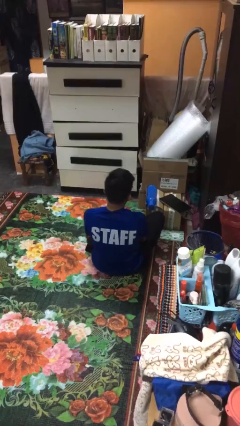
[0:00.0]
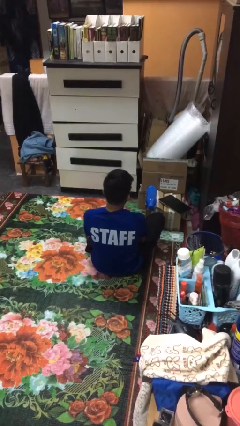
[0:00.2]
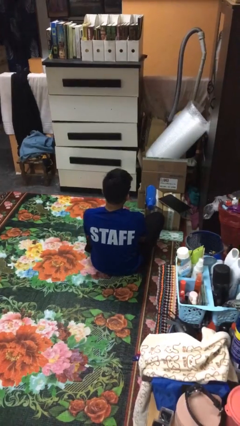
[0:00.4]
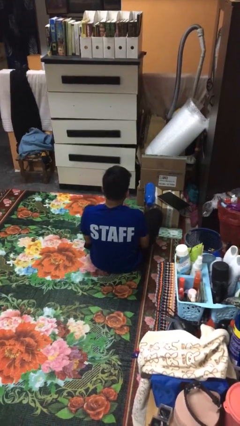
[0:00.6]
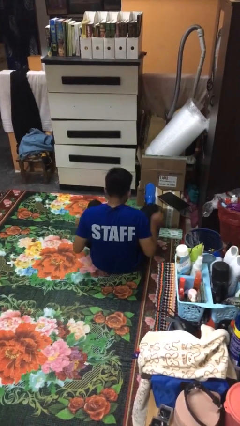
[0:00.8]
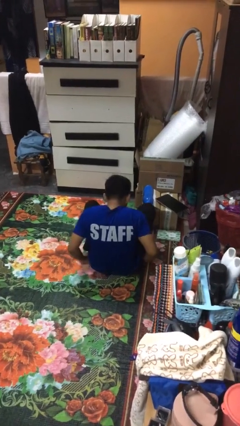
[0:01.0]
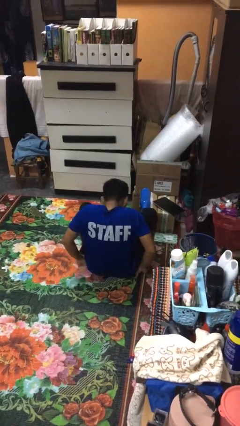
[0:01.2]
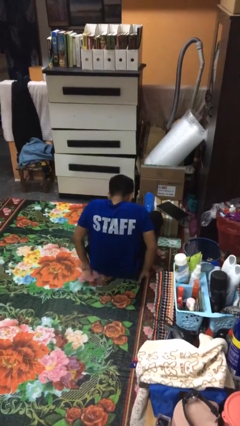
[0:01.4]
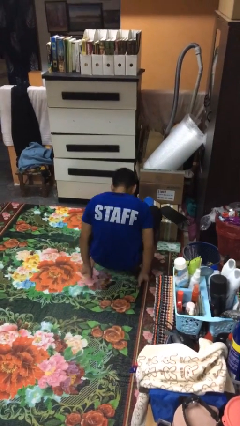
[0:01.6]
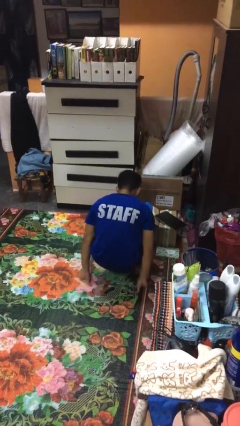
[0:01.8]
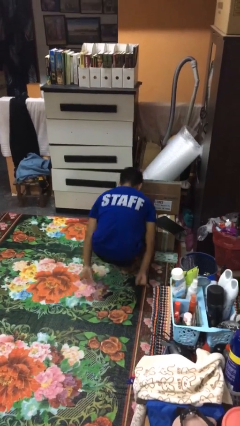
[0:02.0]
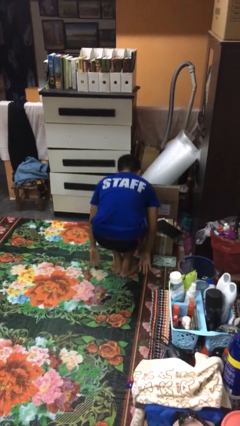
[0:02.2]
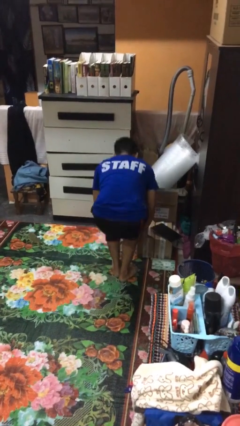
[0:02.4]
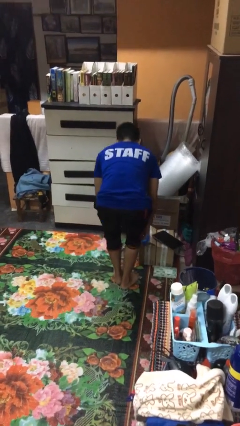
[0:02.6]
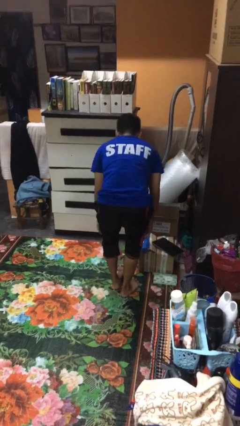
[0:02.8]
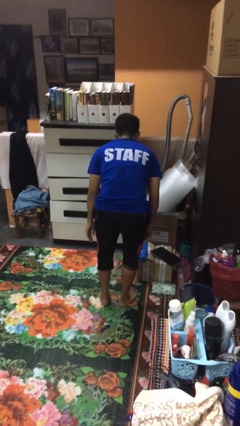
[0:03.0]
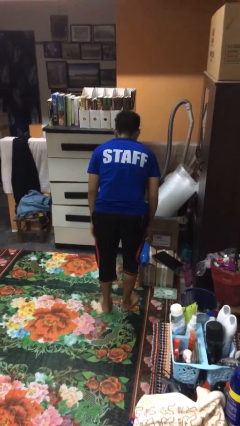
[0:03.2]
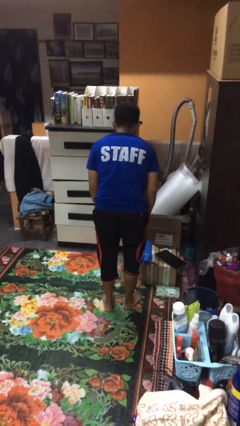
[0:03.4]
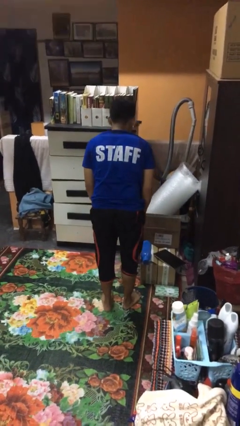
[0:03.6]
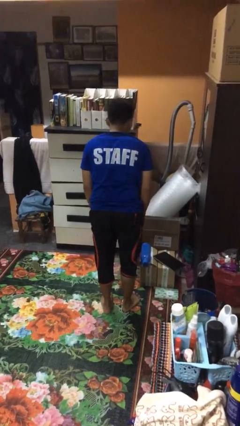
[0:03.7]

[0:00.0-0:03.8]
person stands up from floor

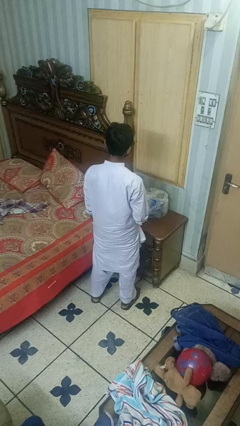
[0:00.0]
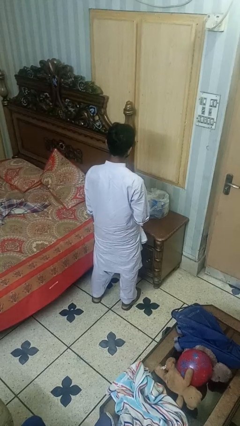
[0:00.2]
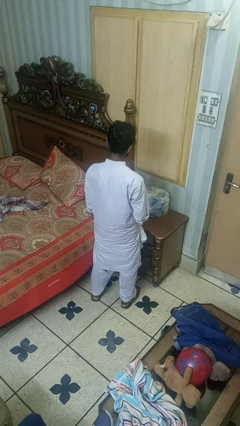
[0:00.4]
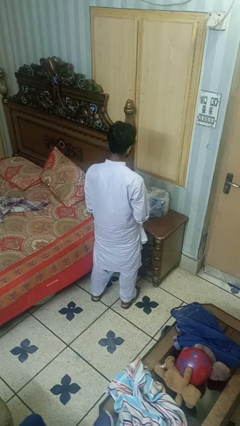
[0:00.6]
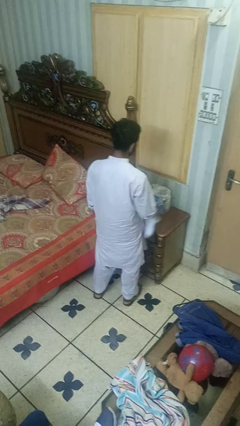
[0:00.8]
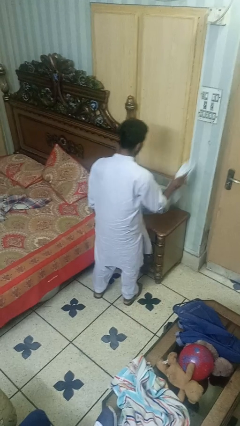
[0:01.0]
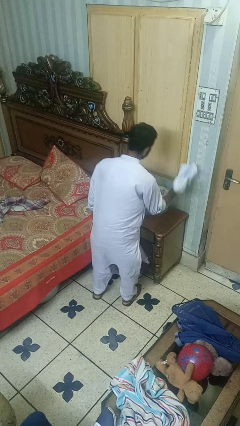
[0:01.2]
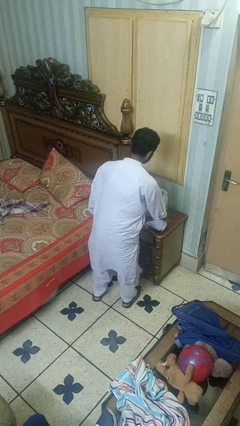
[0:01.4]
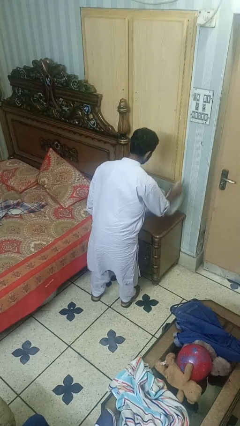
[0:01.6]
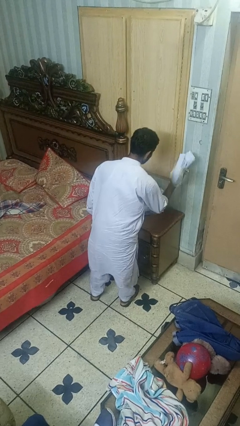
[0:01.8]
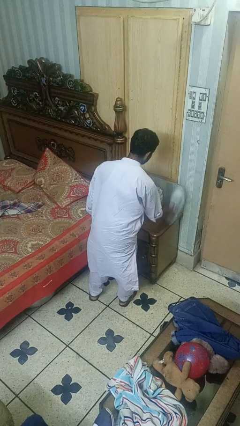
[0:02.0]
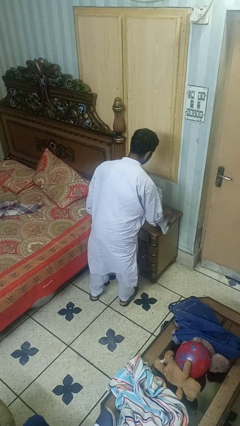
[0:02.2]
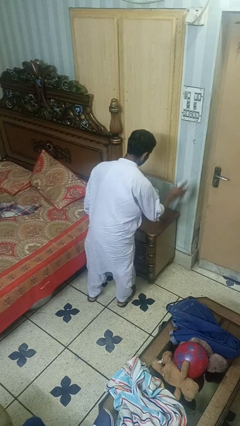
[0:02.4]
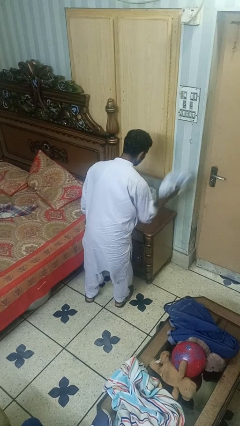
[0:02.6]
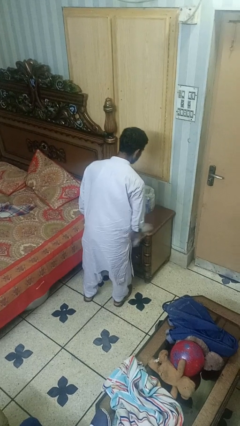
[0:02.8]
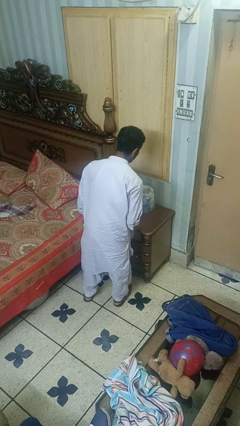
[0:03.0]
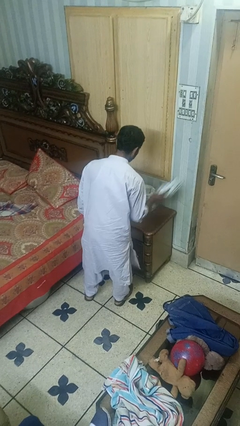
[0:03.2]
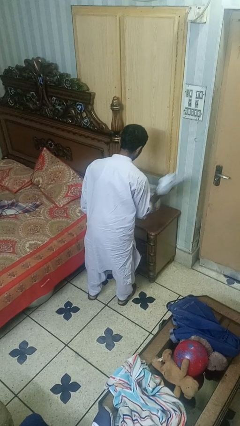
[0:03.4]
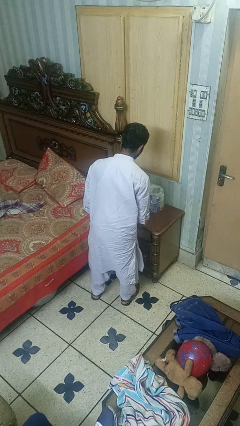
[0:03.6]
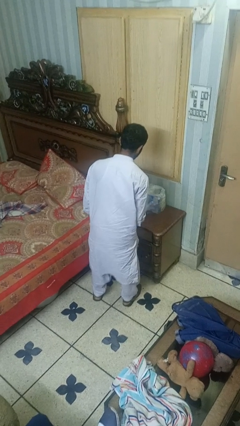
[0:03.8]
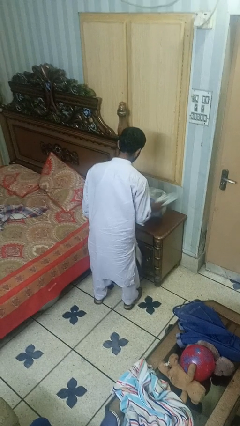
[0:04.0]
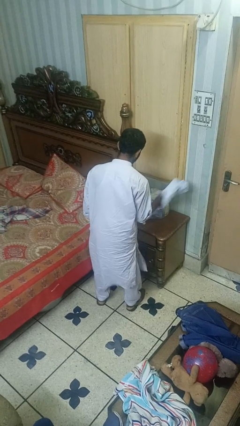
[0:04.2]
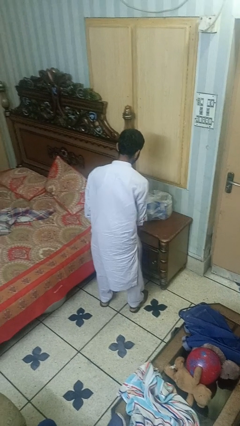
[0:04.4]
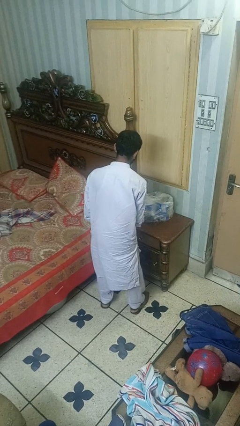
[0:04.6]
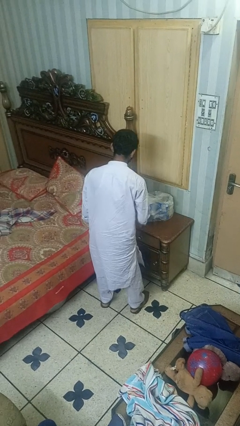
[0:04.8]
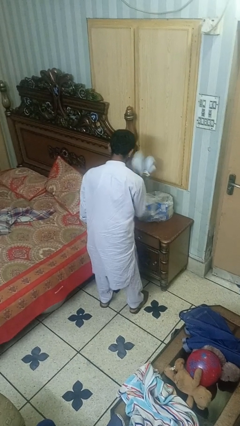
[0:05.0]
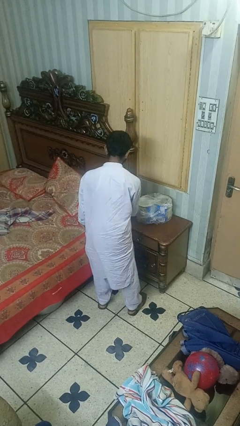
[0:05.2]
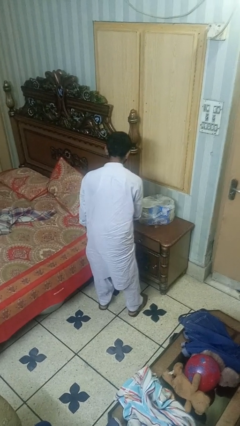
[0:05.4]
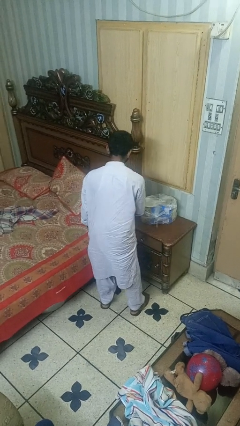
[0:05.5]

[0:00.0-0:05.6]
person dusts furniture

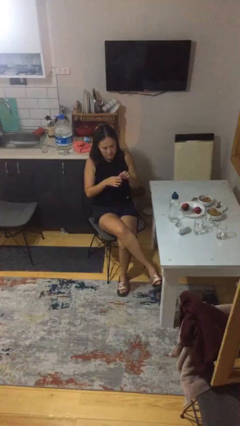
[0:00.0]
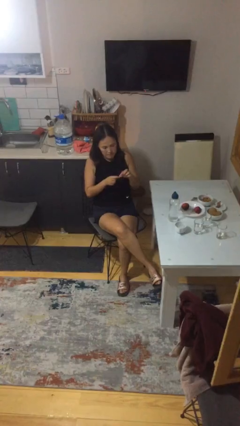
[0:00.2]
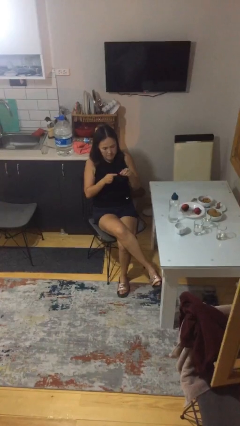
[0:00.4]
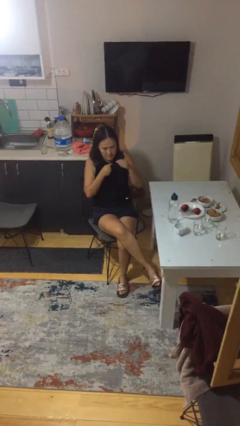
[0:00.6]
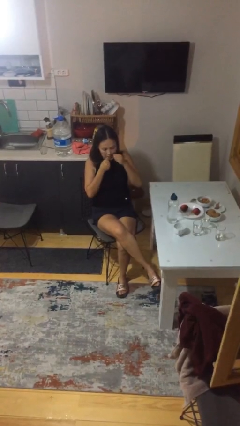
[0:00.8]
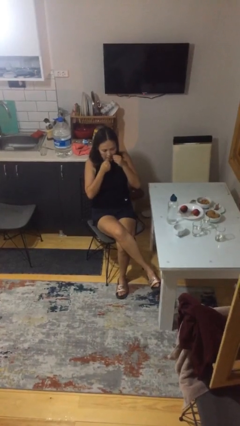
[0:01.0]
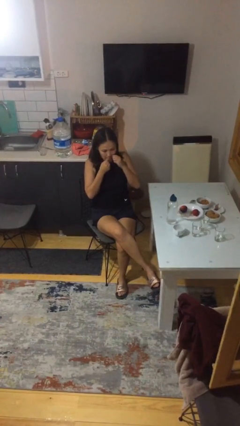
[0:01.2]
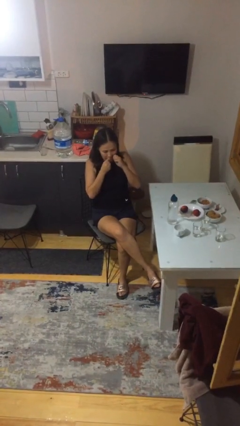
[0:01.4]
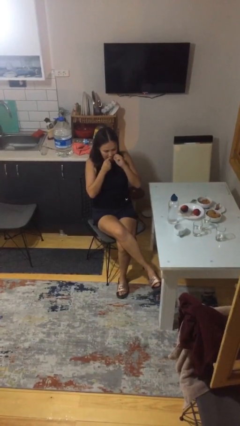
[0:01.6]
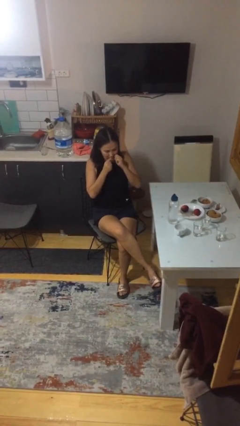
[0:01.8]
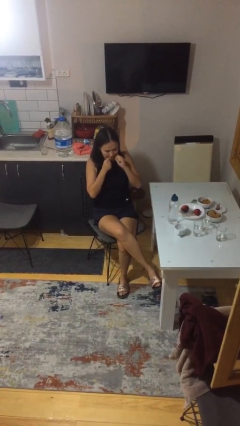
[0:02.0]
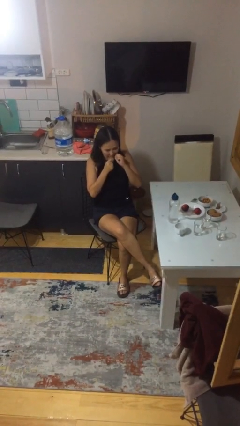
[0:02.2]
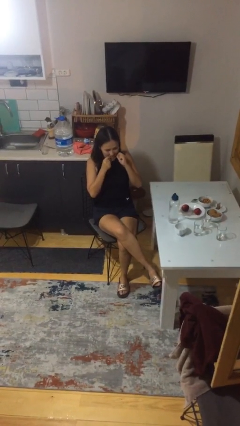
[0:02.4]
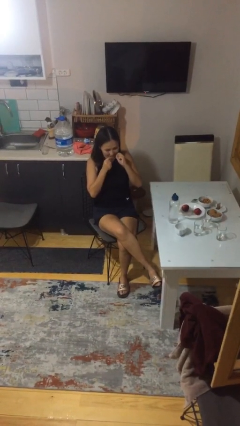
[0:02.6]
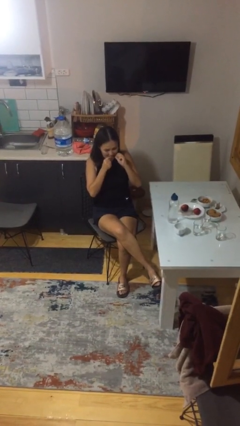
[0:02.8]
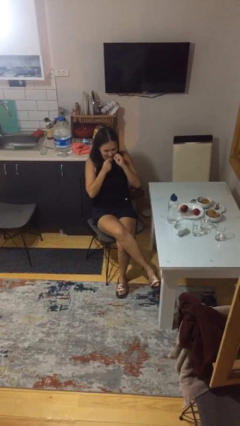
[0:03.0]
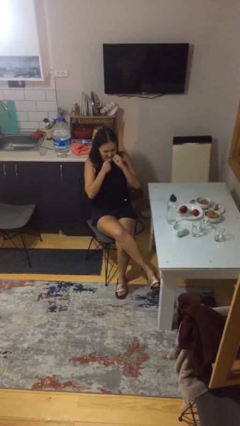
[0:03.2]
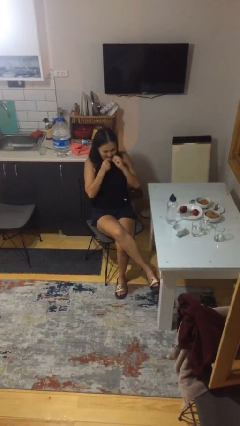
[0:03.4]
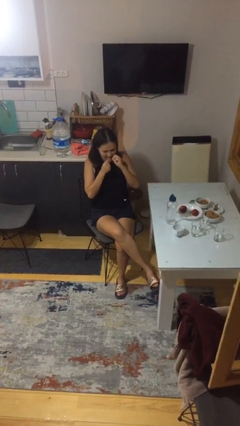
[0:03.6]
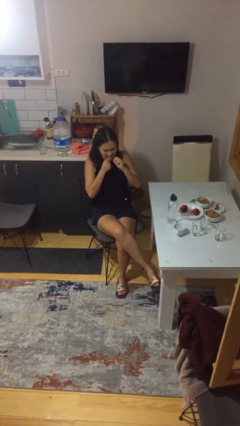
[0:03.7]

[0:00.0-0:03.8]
person flosses

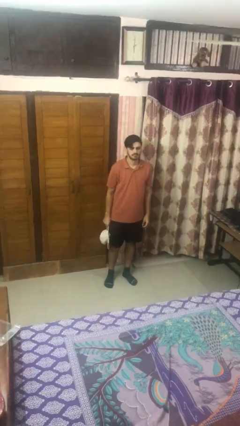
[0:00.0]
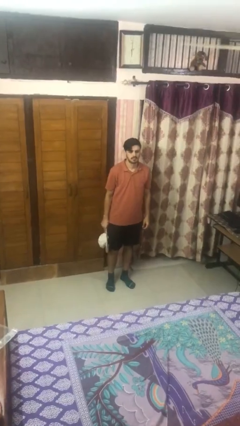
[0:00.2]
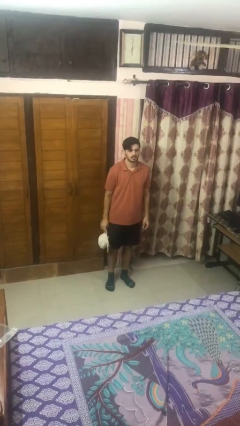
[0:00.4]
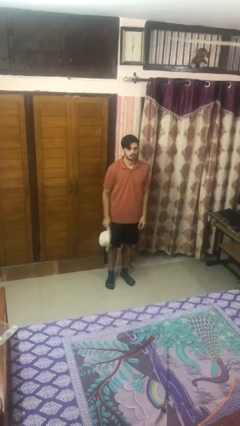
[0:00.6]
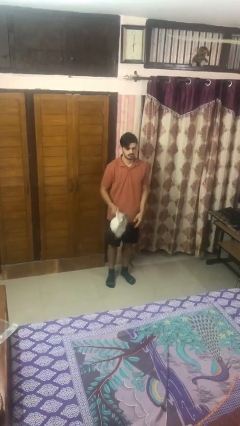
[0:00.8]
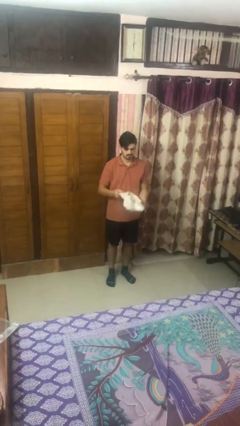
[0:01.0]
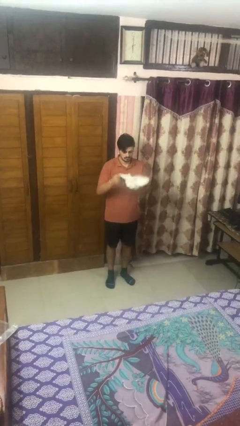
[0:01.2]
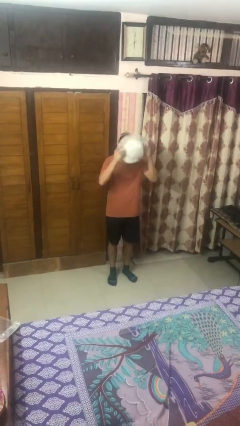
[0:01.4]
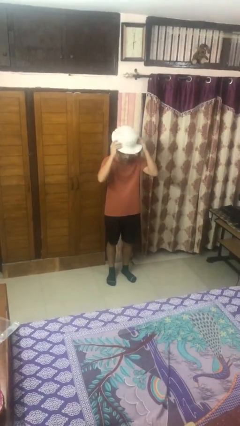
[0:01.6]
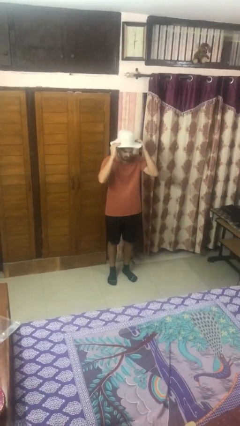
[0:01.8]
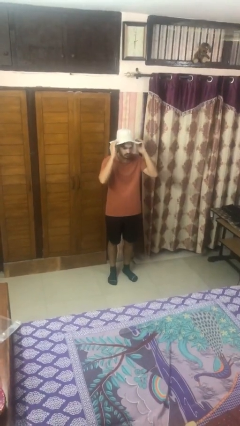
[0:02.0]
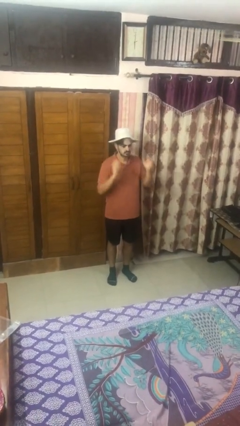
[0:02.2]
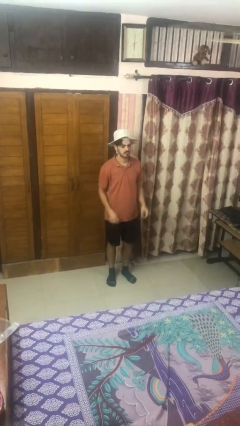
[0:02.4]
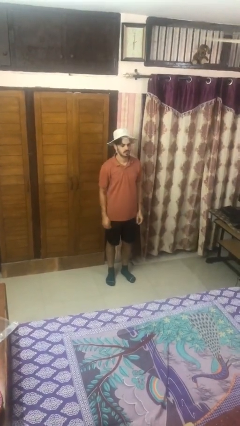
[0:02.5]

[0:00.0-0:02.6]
person puts on hat

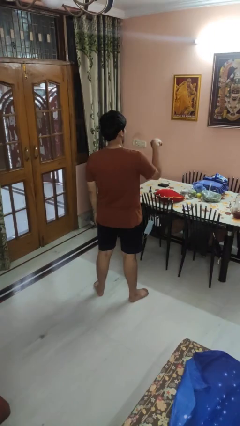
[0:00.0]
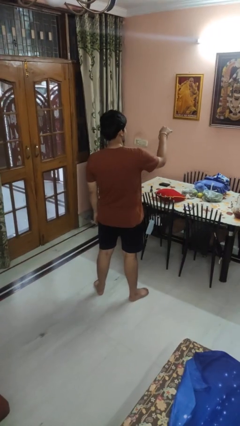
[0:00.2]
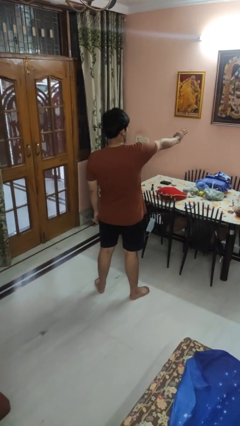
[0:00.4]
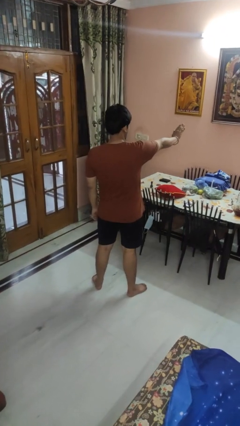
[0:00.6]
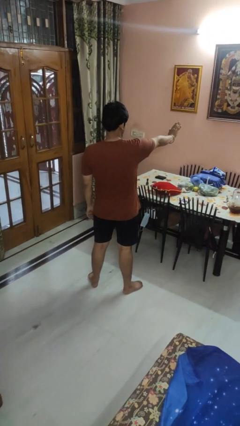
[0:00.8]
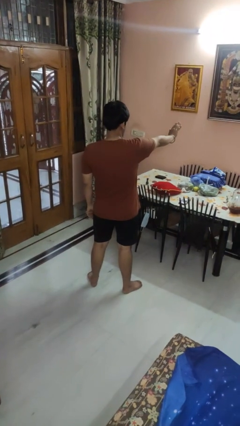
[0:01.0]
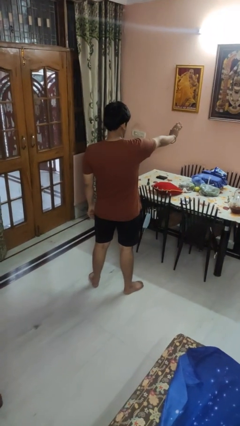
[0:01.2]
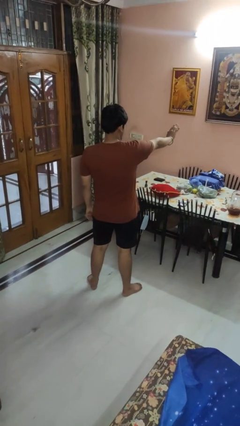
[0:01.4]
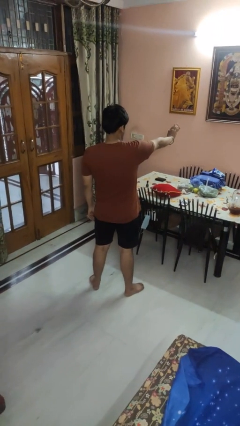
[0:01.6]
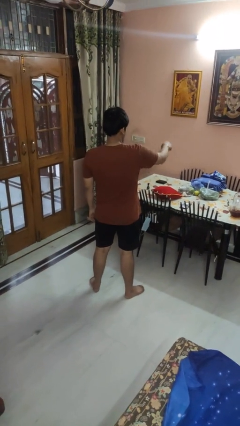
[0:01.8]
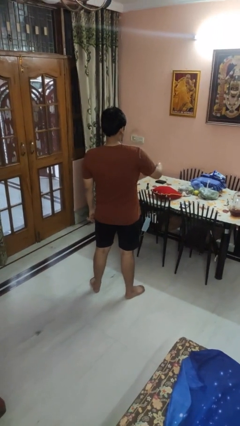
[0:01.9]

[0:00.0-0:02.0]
person gestures stop
